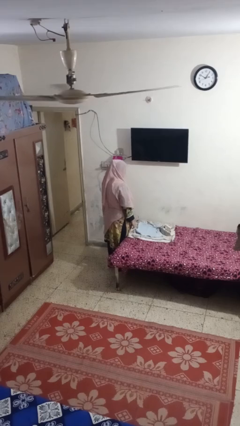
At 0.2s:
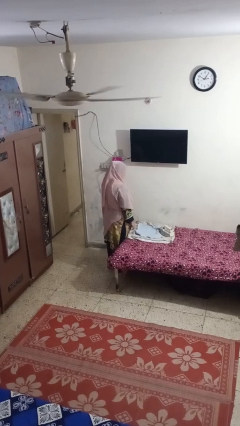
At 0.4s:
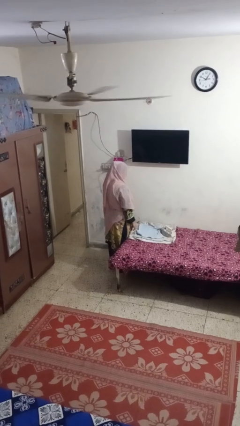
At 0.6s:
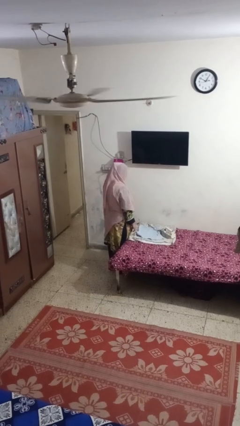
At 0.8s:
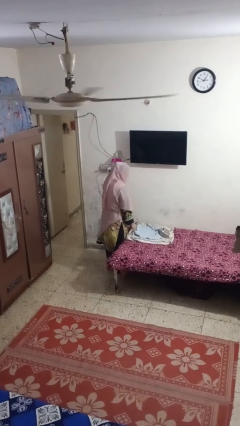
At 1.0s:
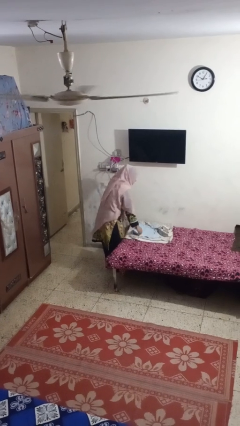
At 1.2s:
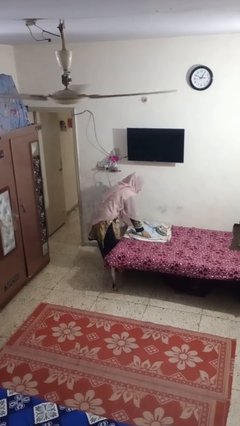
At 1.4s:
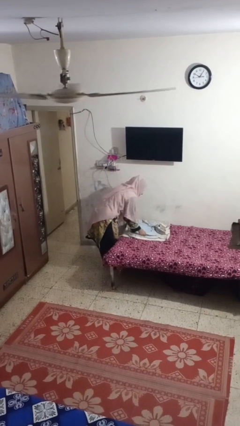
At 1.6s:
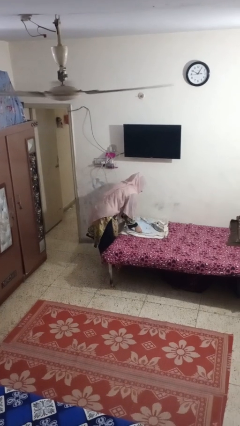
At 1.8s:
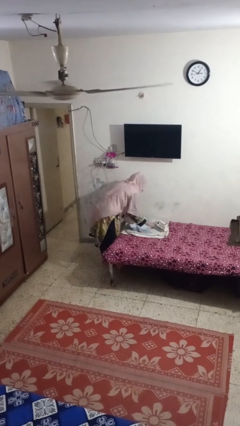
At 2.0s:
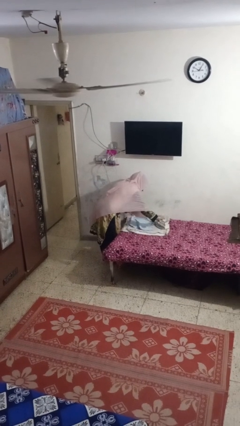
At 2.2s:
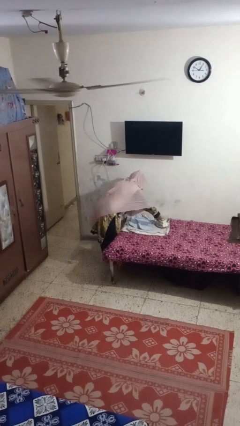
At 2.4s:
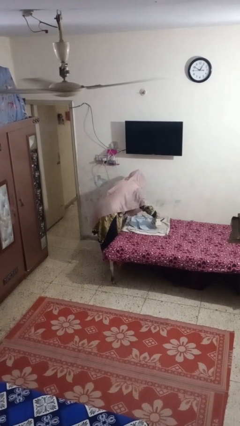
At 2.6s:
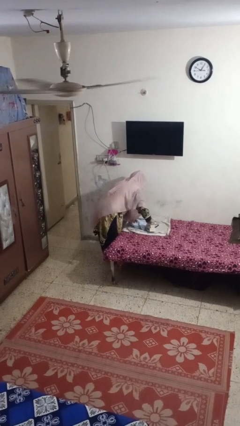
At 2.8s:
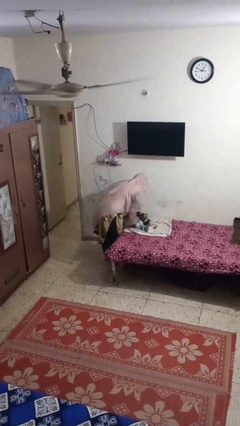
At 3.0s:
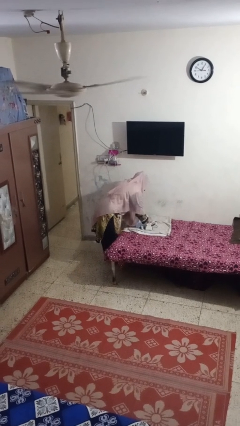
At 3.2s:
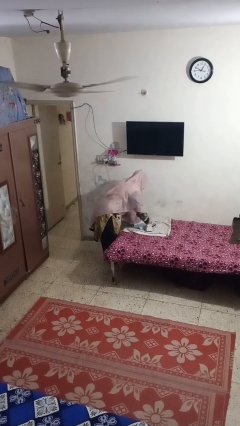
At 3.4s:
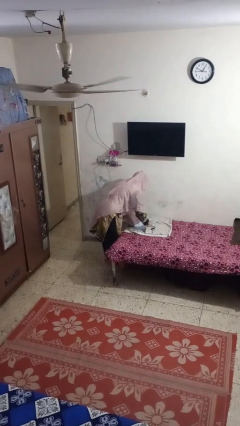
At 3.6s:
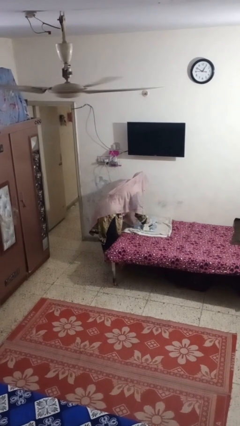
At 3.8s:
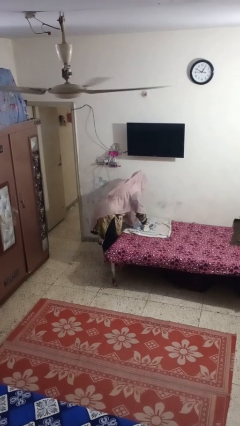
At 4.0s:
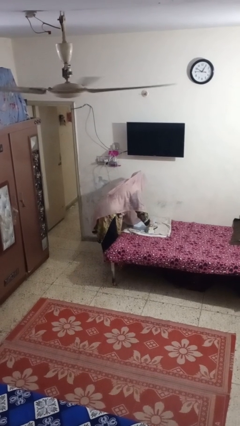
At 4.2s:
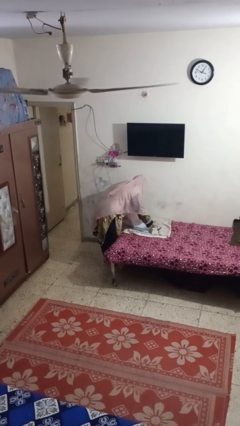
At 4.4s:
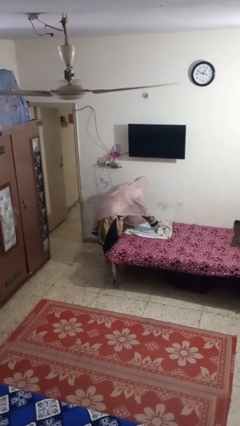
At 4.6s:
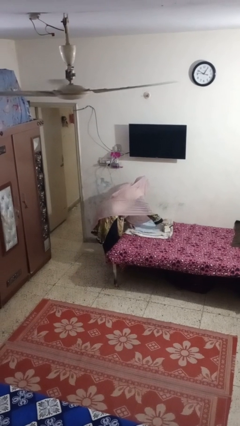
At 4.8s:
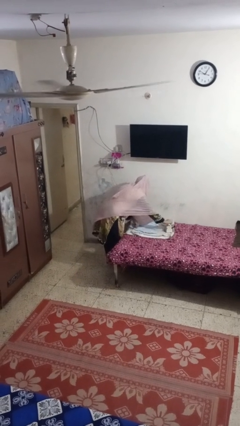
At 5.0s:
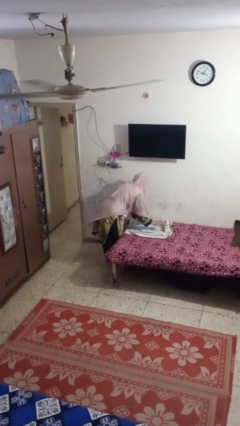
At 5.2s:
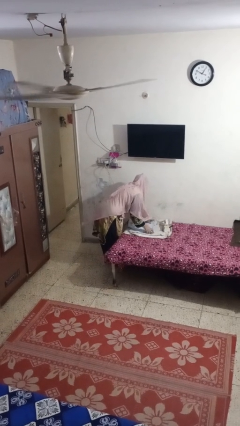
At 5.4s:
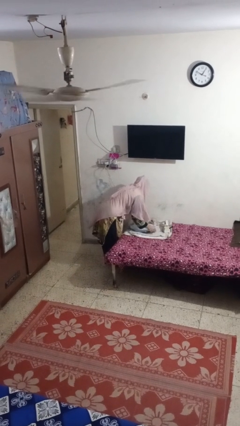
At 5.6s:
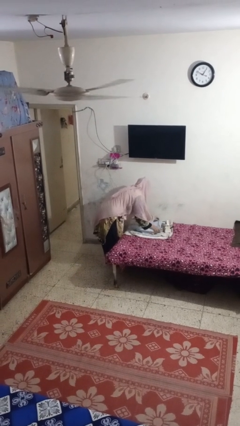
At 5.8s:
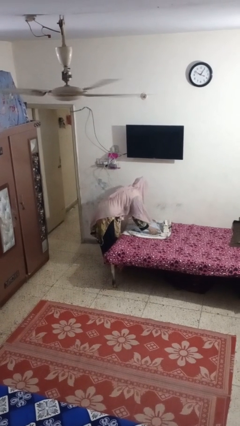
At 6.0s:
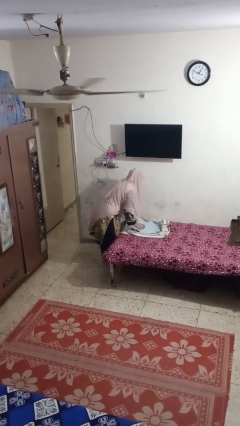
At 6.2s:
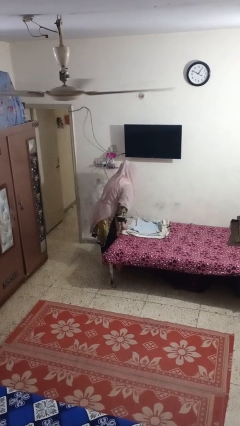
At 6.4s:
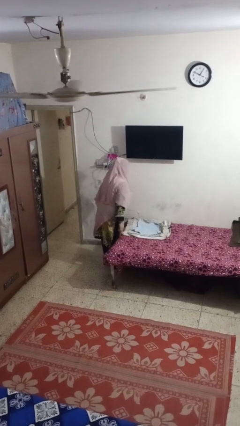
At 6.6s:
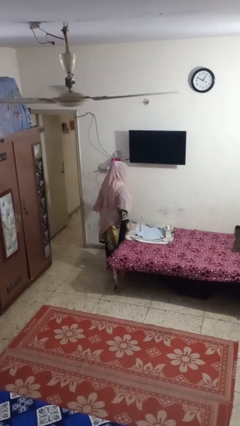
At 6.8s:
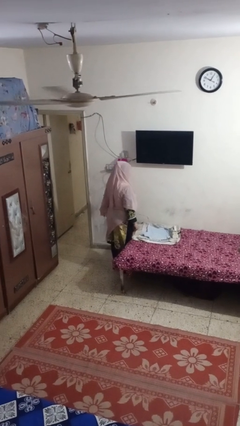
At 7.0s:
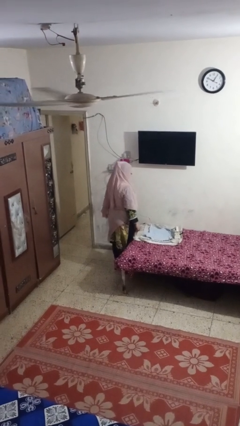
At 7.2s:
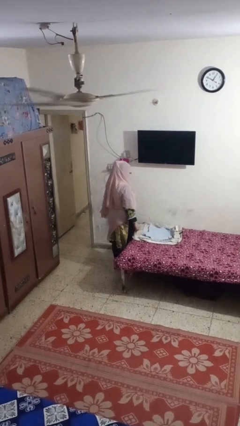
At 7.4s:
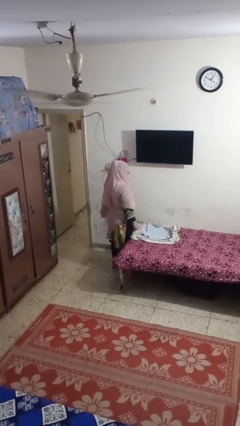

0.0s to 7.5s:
person irons clothes

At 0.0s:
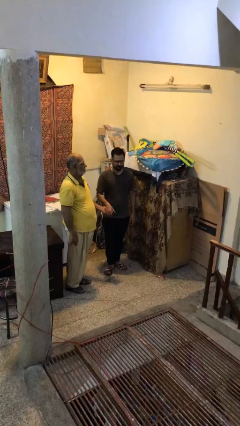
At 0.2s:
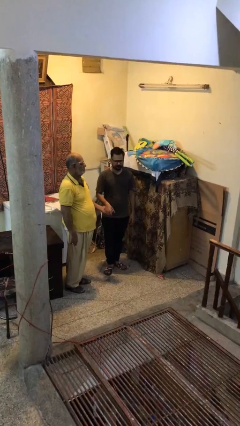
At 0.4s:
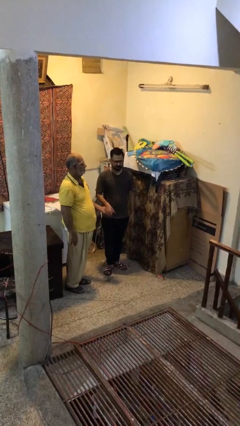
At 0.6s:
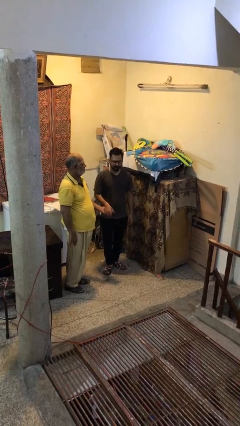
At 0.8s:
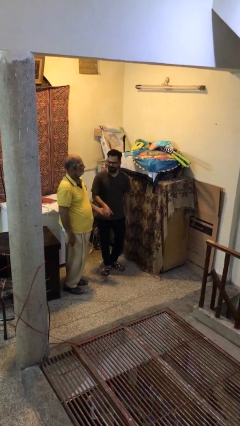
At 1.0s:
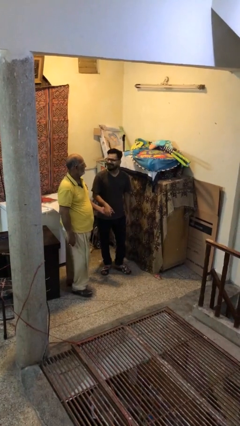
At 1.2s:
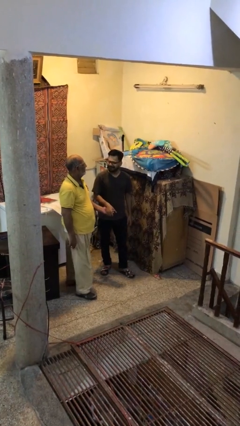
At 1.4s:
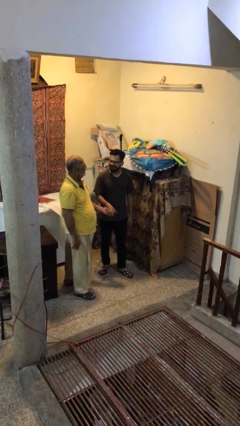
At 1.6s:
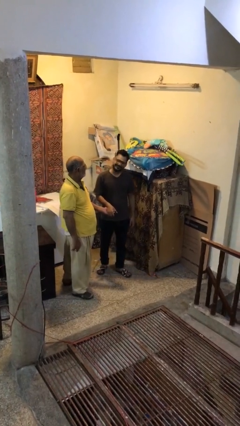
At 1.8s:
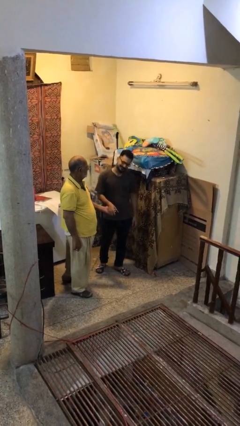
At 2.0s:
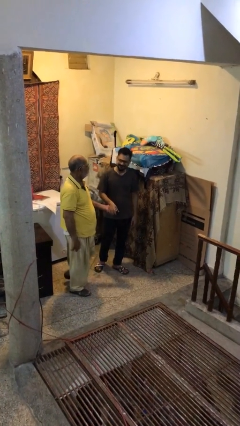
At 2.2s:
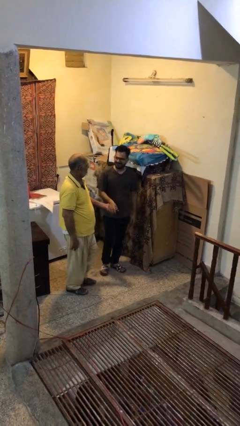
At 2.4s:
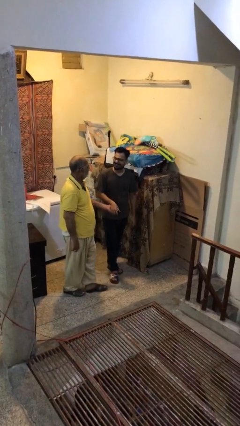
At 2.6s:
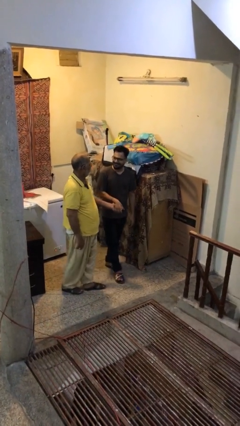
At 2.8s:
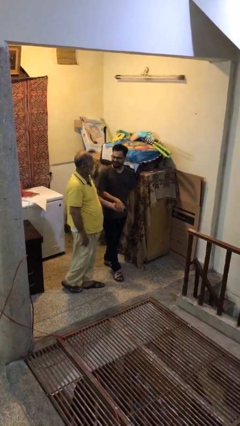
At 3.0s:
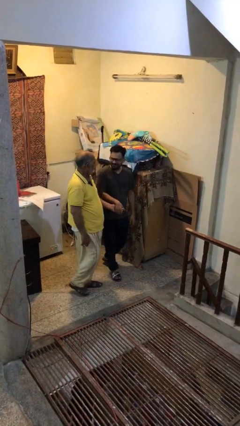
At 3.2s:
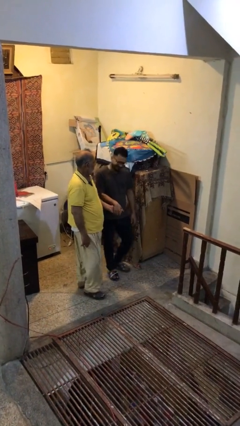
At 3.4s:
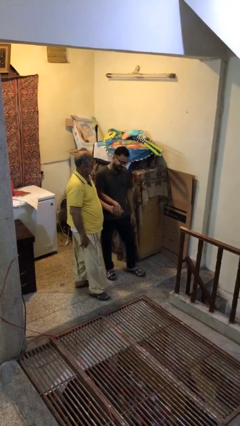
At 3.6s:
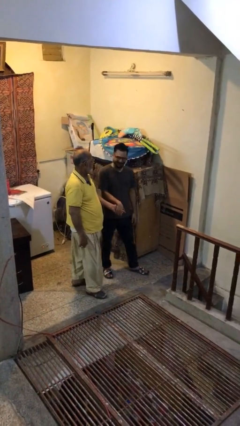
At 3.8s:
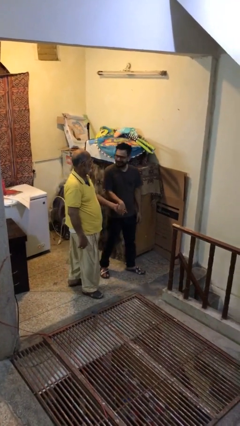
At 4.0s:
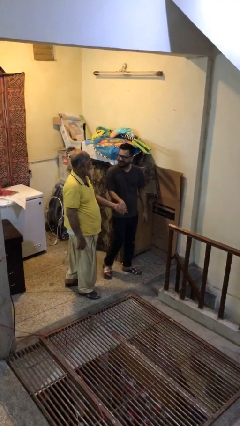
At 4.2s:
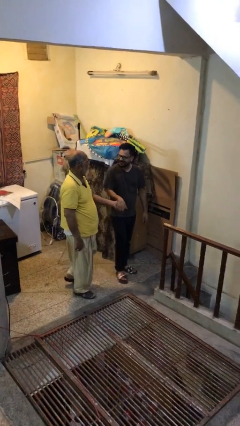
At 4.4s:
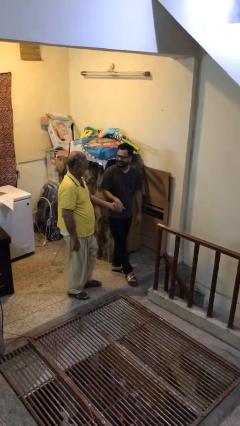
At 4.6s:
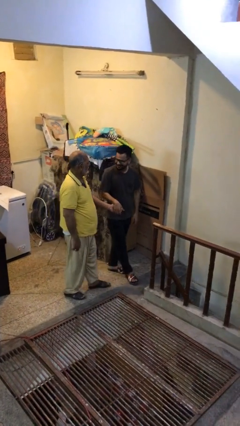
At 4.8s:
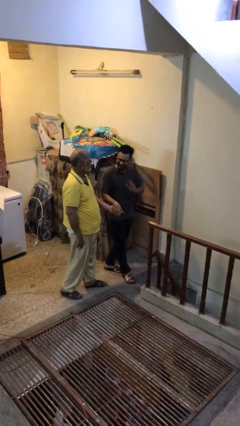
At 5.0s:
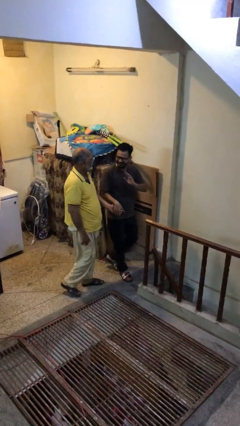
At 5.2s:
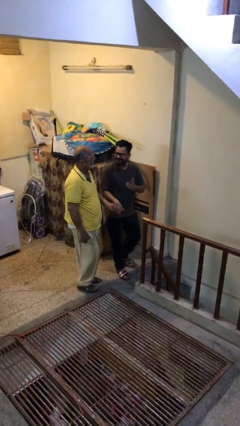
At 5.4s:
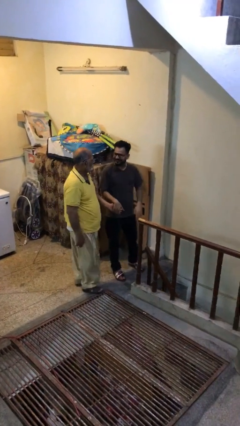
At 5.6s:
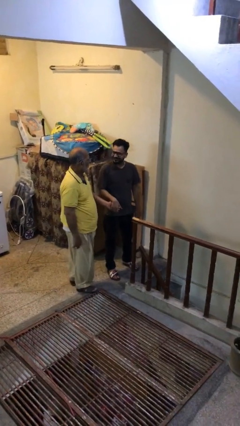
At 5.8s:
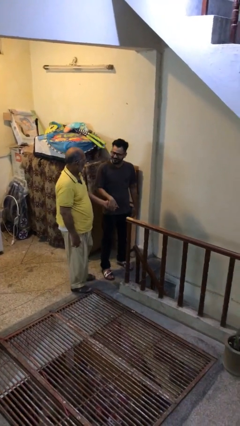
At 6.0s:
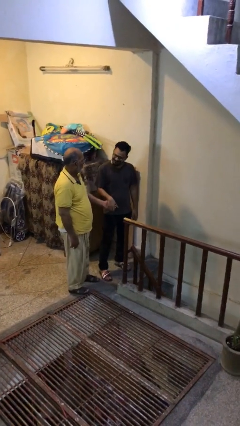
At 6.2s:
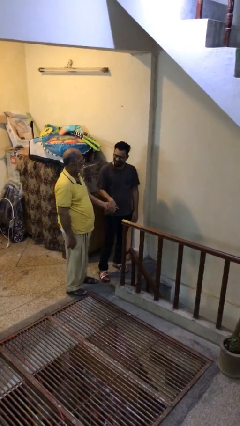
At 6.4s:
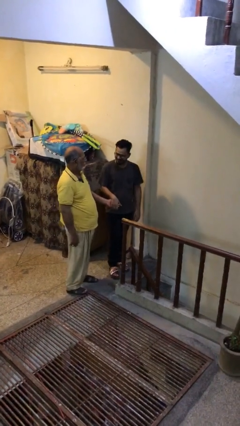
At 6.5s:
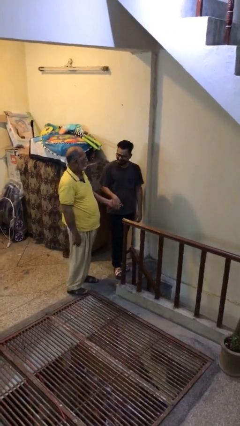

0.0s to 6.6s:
person holds hand

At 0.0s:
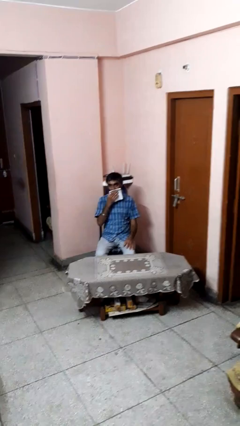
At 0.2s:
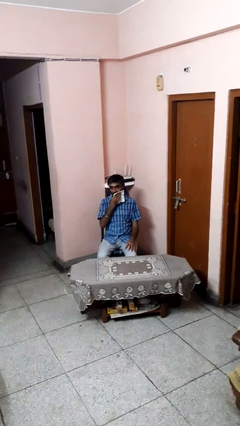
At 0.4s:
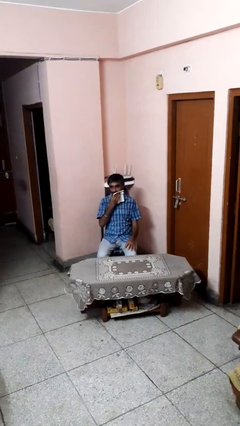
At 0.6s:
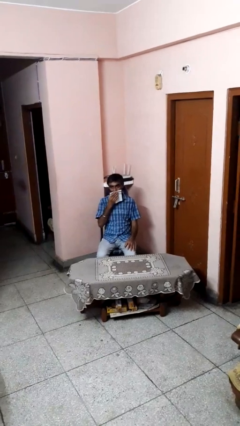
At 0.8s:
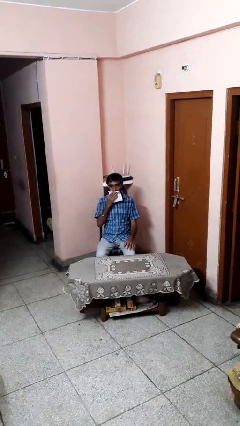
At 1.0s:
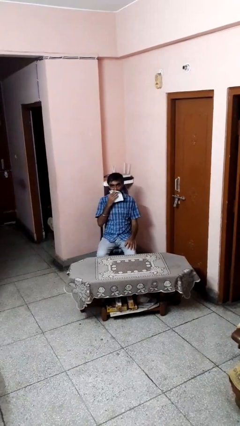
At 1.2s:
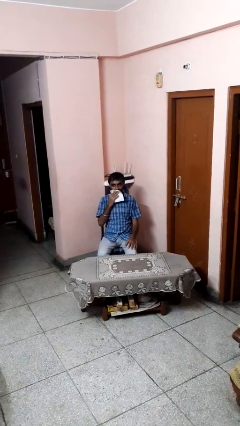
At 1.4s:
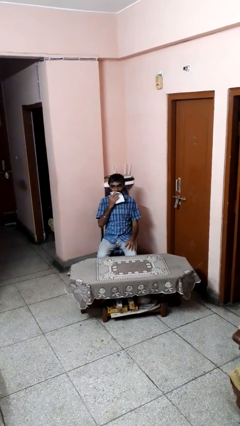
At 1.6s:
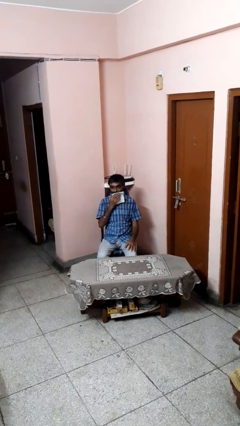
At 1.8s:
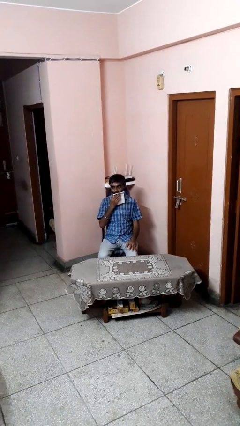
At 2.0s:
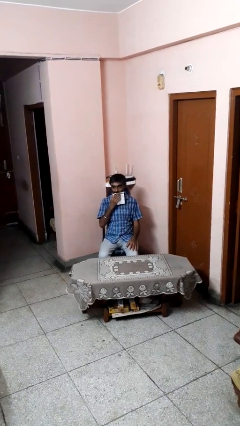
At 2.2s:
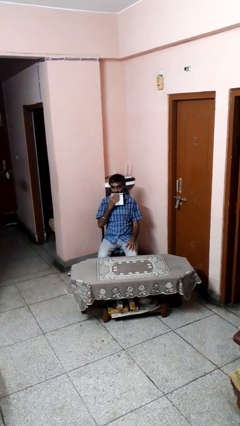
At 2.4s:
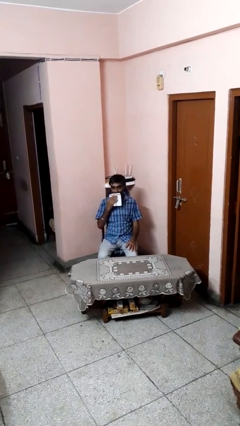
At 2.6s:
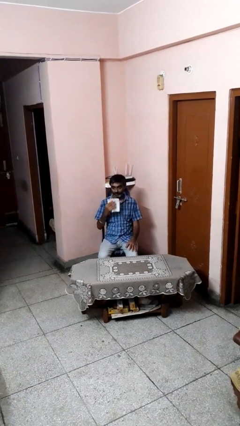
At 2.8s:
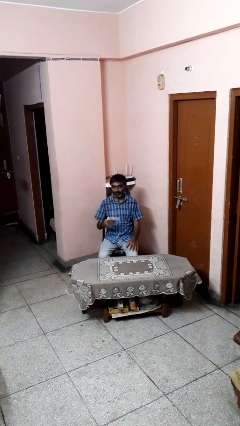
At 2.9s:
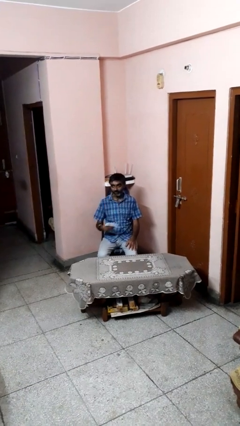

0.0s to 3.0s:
person wipes mouth with napkin

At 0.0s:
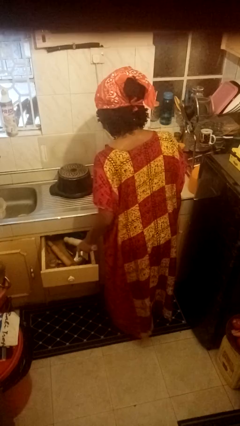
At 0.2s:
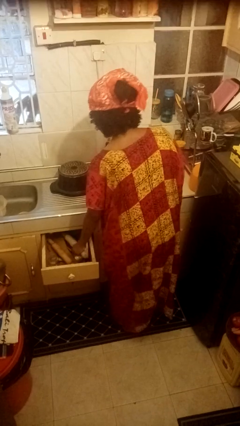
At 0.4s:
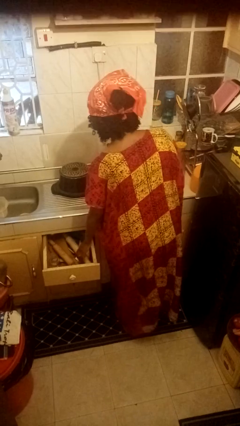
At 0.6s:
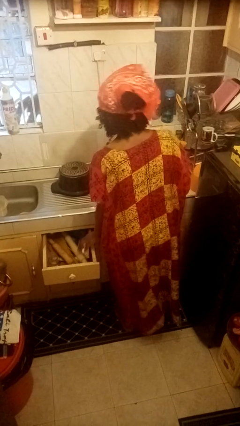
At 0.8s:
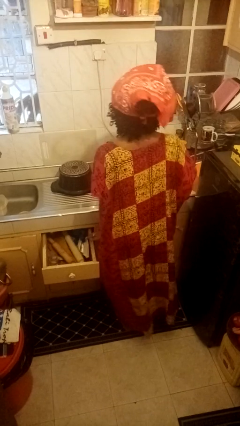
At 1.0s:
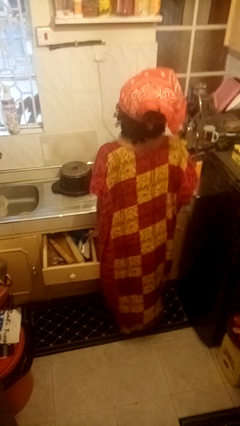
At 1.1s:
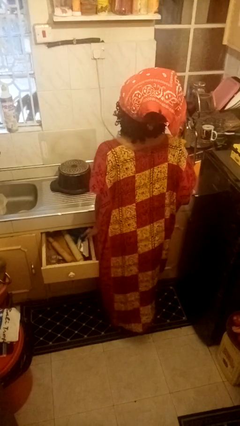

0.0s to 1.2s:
person puts object into kitchen drawer
